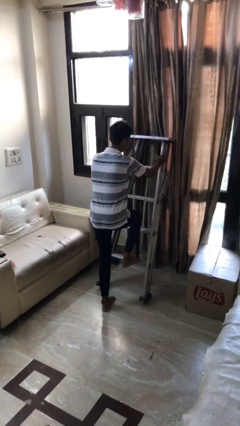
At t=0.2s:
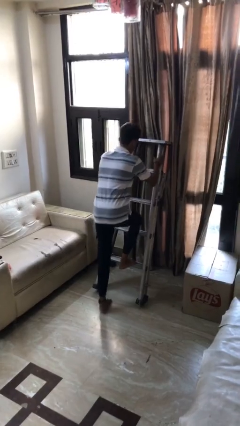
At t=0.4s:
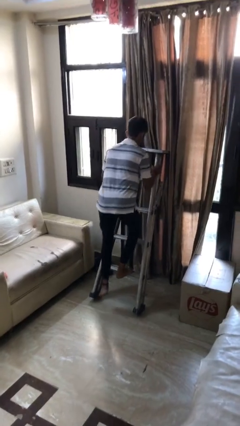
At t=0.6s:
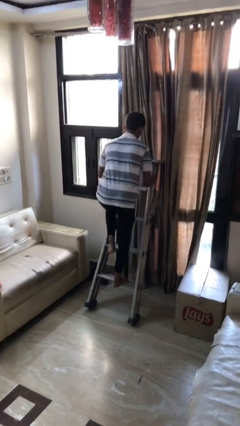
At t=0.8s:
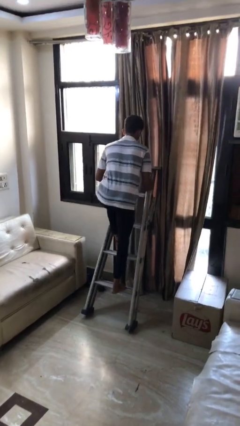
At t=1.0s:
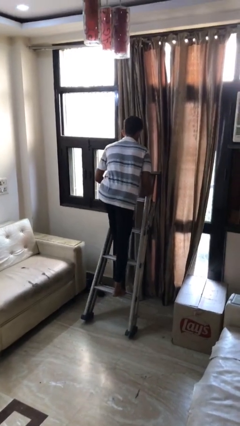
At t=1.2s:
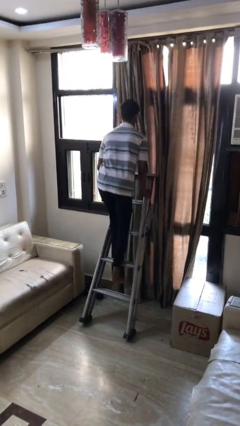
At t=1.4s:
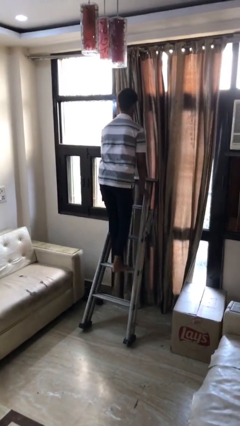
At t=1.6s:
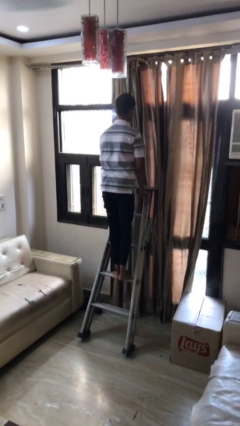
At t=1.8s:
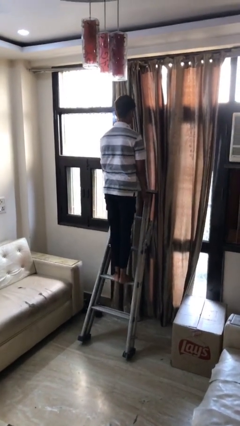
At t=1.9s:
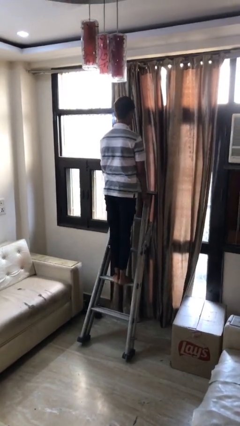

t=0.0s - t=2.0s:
person climbs up ladder

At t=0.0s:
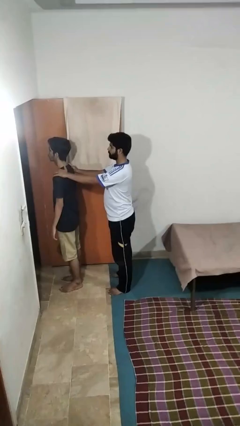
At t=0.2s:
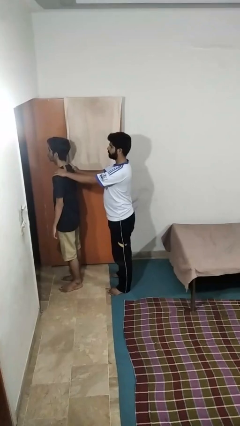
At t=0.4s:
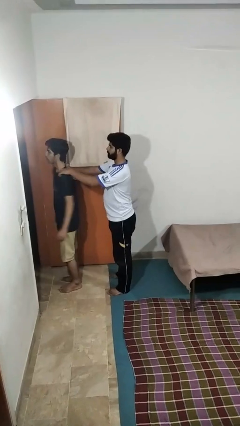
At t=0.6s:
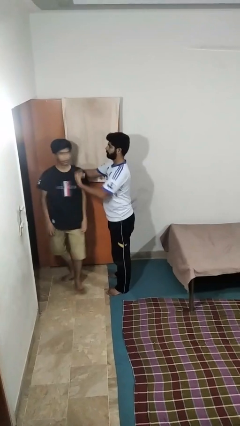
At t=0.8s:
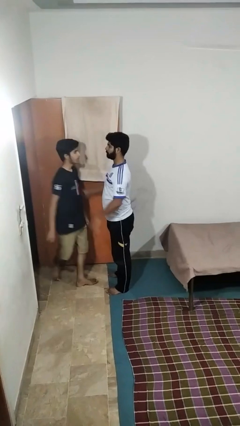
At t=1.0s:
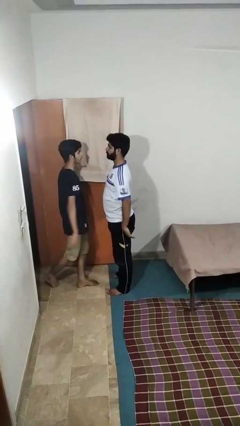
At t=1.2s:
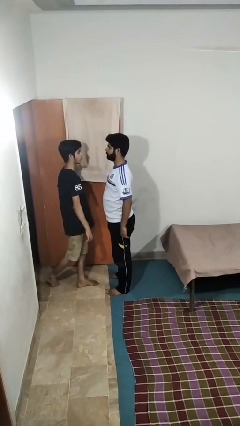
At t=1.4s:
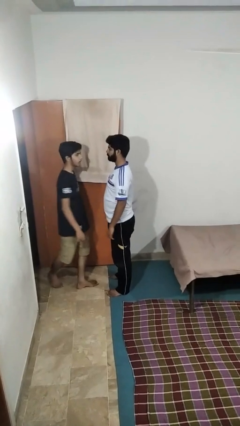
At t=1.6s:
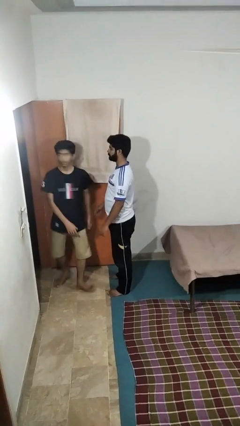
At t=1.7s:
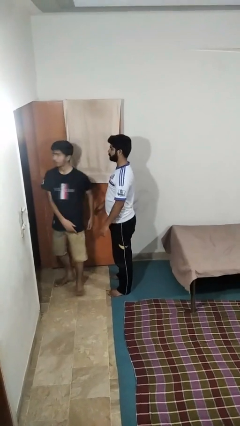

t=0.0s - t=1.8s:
person spins person around

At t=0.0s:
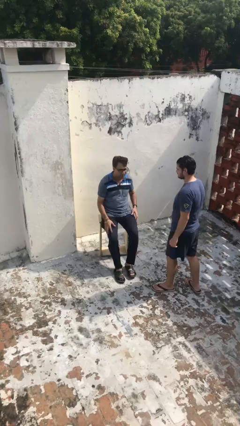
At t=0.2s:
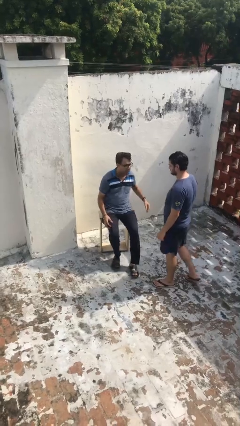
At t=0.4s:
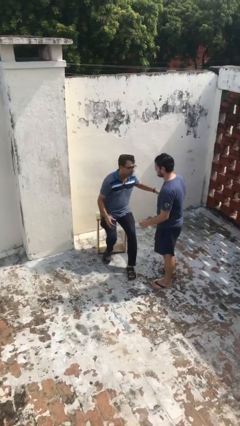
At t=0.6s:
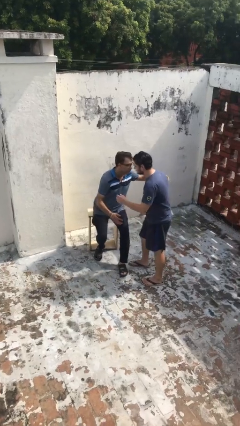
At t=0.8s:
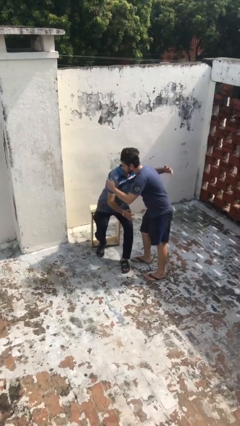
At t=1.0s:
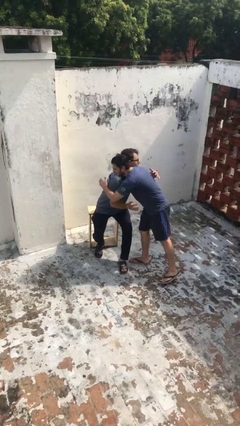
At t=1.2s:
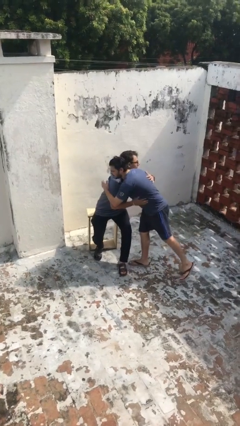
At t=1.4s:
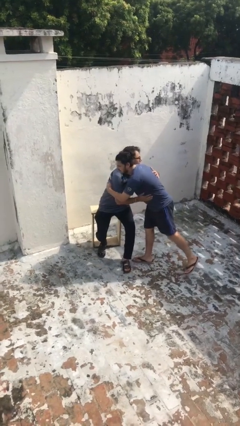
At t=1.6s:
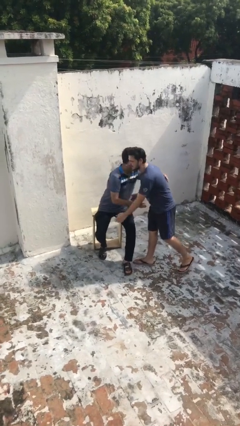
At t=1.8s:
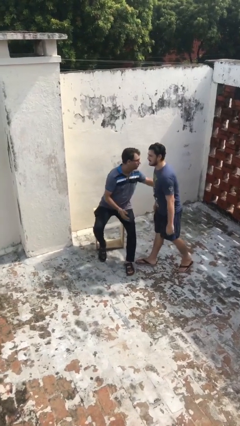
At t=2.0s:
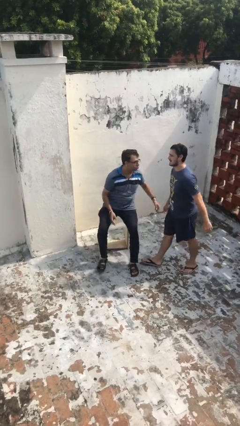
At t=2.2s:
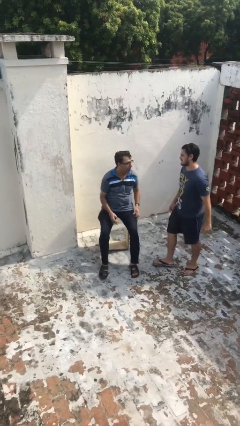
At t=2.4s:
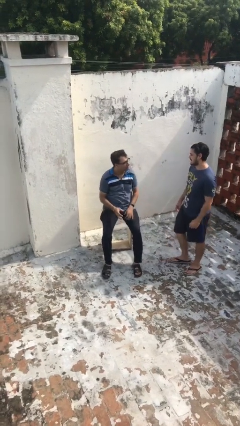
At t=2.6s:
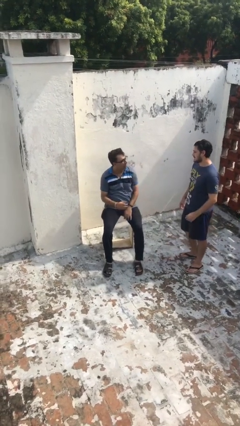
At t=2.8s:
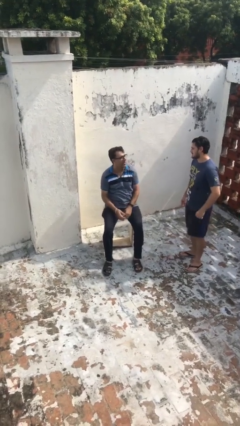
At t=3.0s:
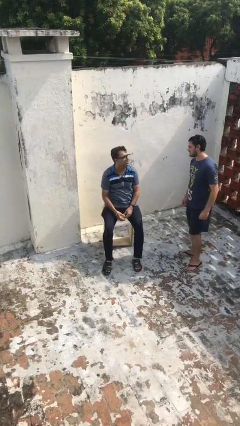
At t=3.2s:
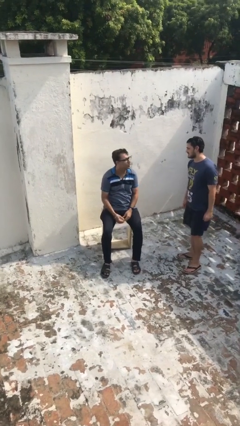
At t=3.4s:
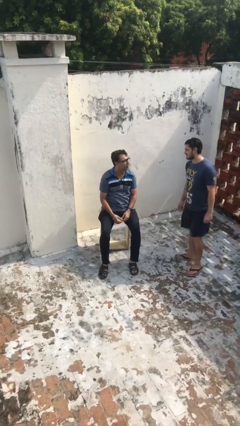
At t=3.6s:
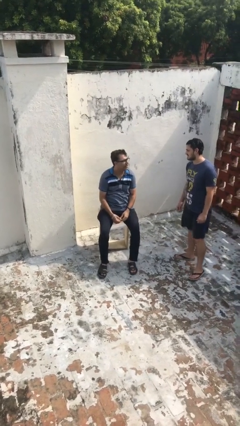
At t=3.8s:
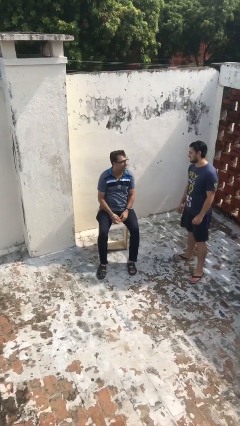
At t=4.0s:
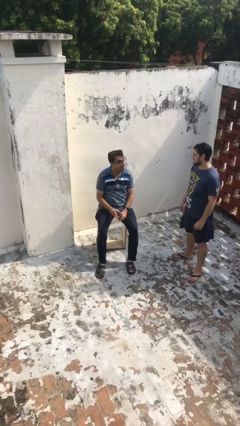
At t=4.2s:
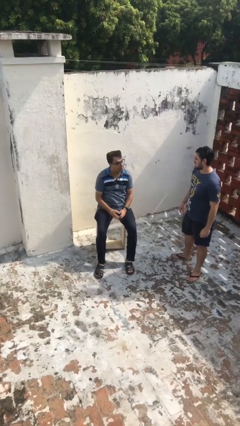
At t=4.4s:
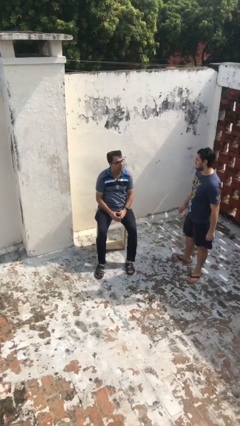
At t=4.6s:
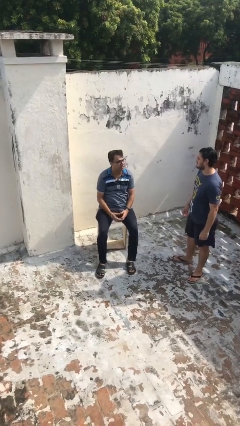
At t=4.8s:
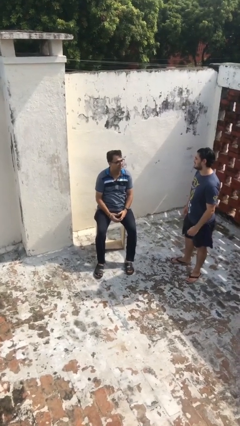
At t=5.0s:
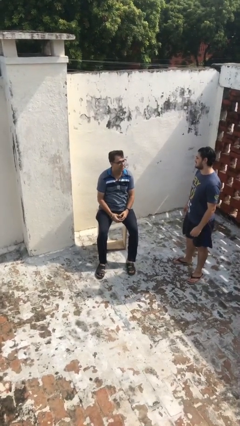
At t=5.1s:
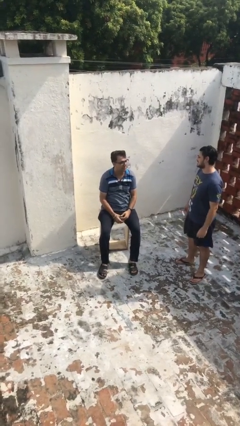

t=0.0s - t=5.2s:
person embraces person

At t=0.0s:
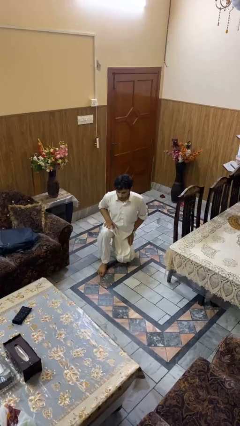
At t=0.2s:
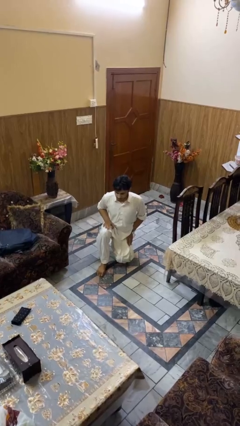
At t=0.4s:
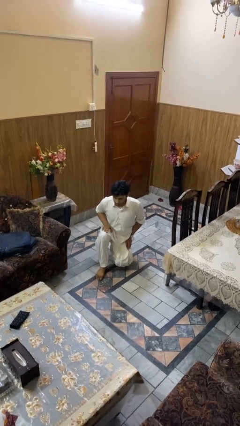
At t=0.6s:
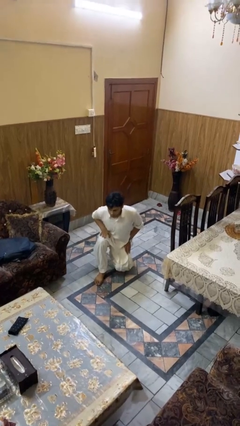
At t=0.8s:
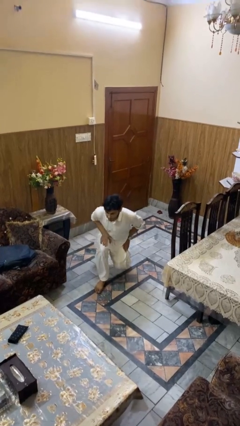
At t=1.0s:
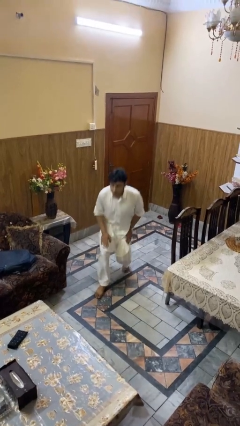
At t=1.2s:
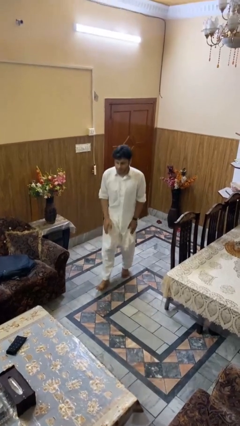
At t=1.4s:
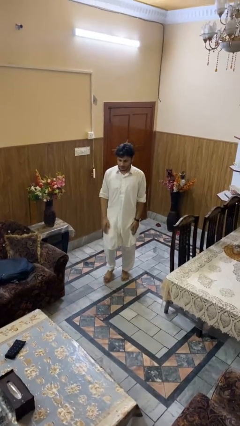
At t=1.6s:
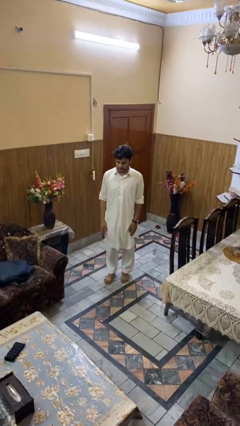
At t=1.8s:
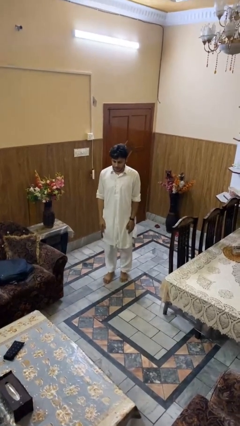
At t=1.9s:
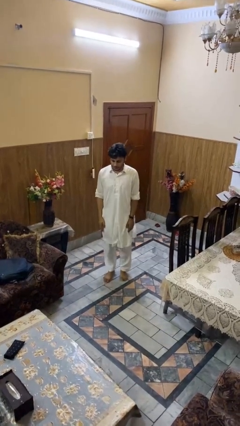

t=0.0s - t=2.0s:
person stands up from floor

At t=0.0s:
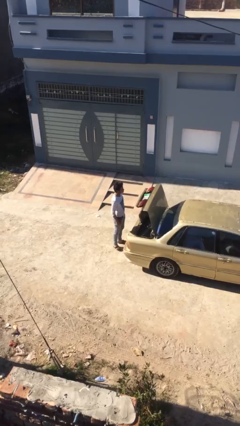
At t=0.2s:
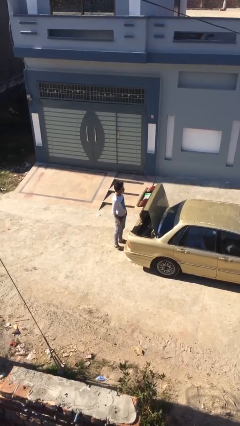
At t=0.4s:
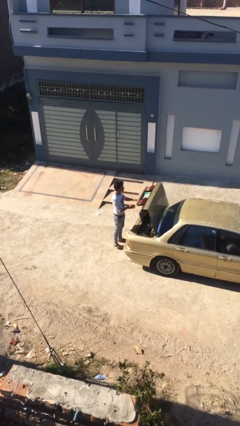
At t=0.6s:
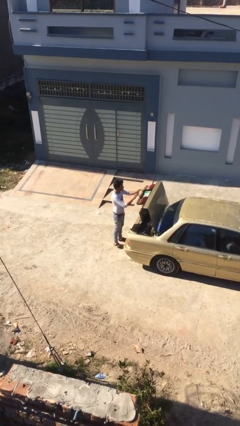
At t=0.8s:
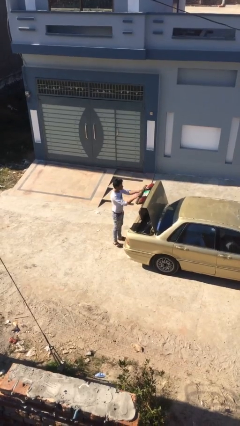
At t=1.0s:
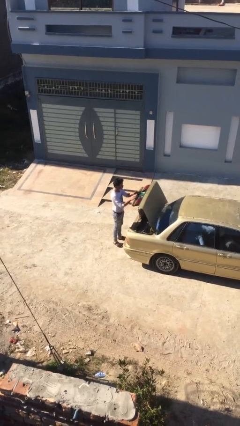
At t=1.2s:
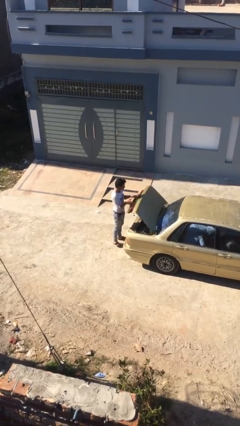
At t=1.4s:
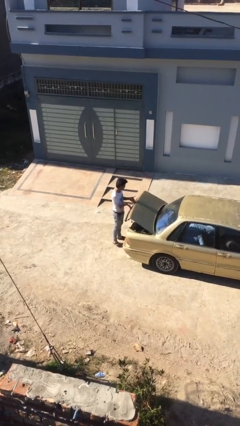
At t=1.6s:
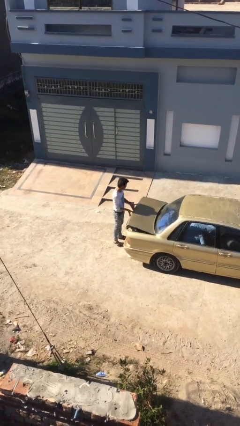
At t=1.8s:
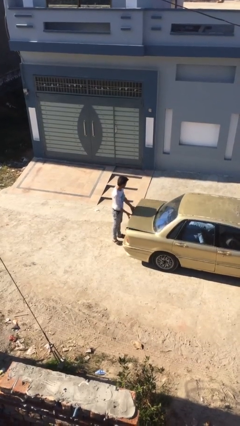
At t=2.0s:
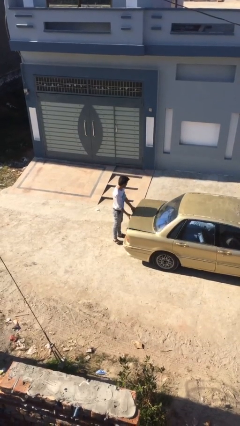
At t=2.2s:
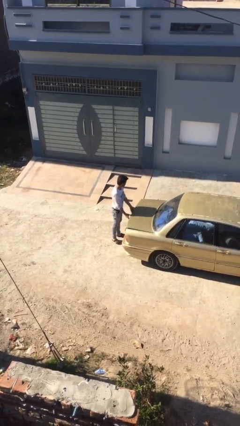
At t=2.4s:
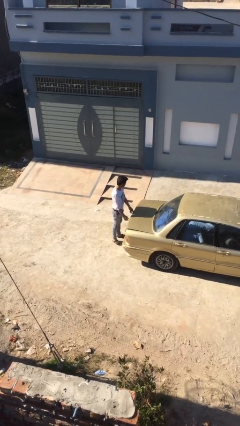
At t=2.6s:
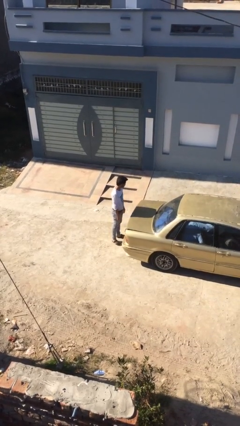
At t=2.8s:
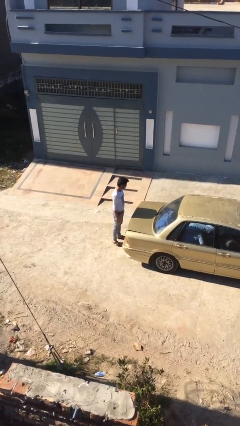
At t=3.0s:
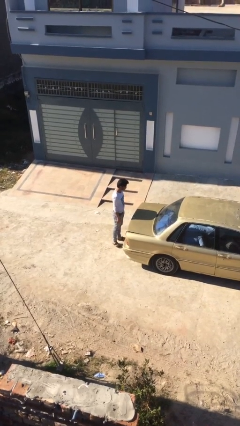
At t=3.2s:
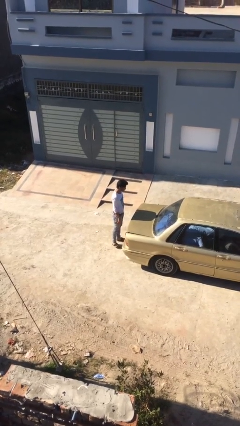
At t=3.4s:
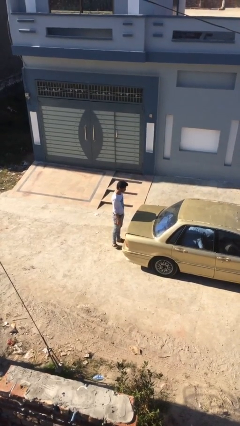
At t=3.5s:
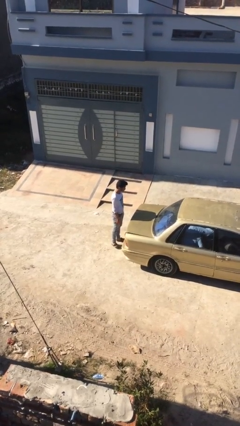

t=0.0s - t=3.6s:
person closes car trunk

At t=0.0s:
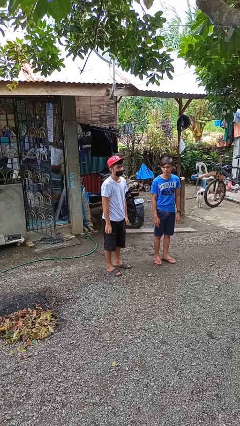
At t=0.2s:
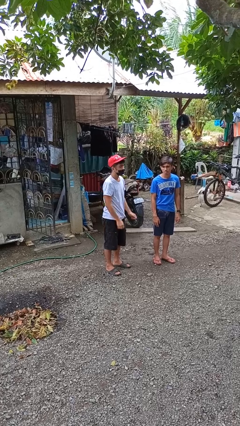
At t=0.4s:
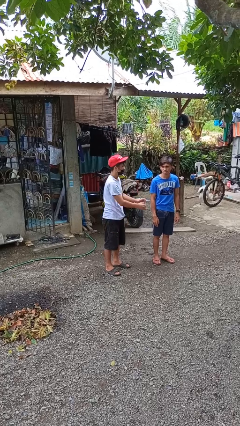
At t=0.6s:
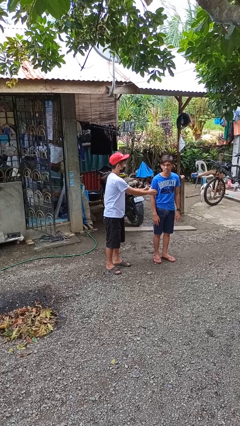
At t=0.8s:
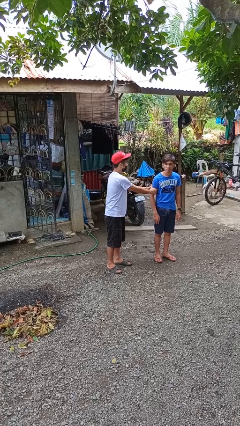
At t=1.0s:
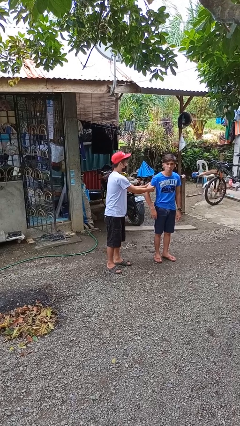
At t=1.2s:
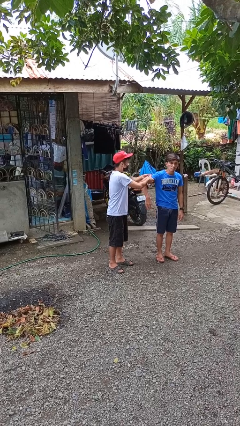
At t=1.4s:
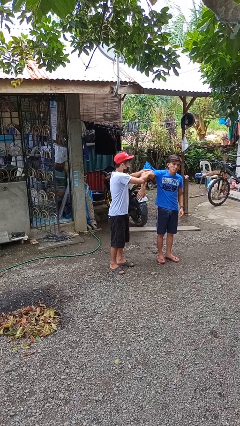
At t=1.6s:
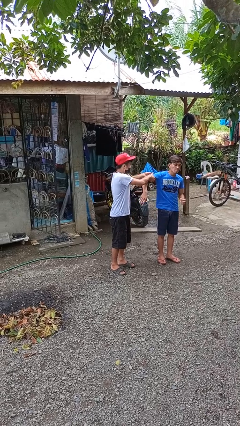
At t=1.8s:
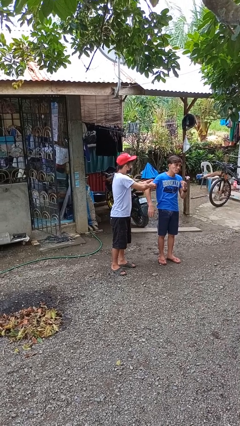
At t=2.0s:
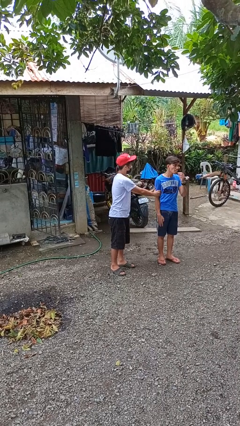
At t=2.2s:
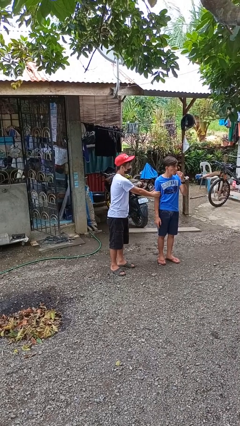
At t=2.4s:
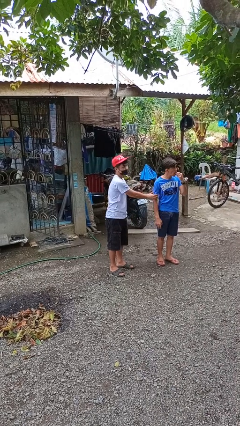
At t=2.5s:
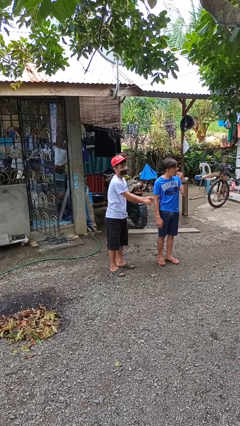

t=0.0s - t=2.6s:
person grabs person by bicep

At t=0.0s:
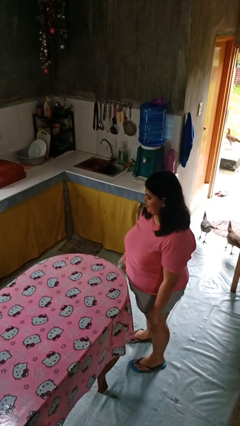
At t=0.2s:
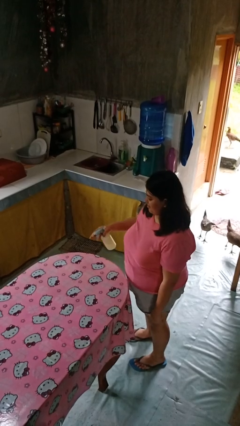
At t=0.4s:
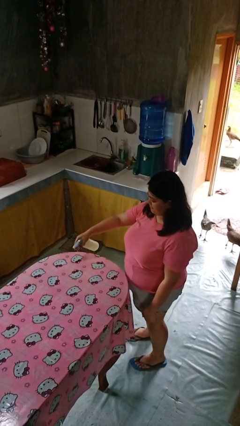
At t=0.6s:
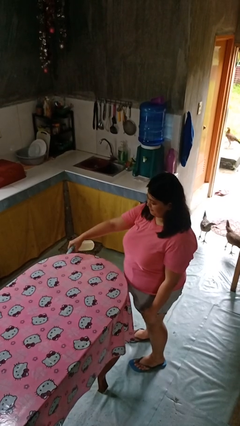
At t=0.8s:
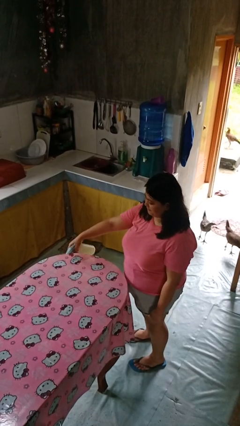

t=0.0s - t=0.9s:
person sprays from bottle
